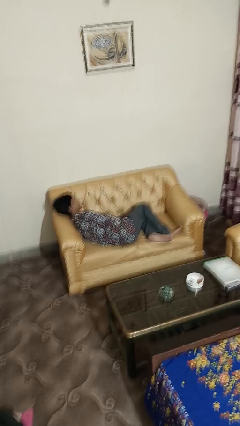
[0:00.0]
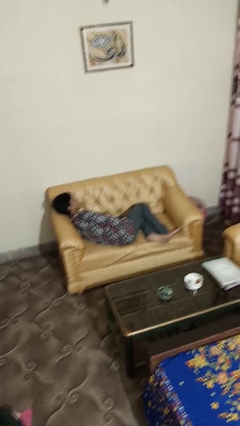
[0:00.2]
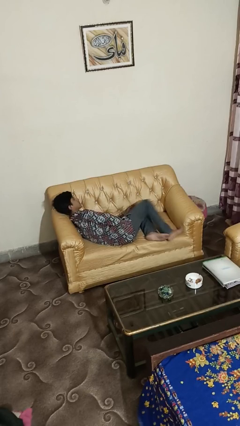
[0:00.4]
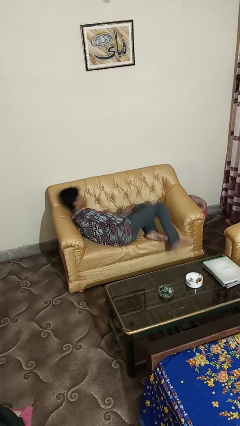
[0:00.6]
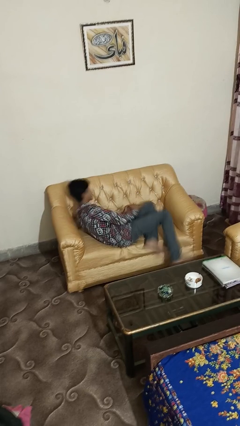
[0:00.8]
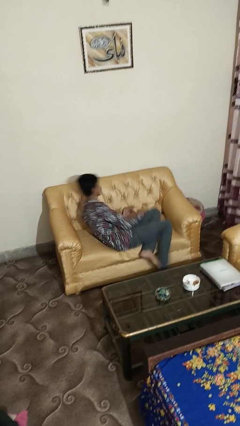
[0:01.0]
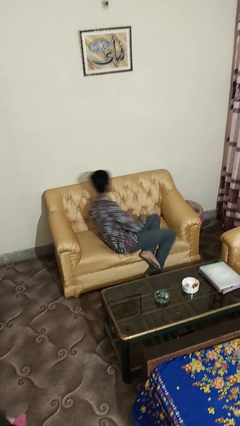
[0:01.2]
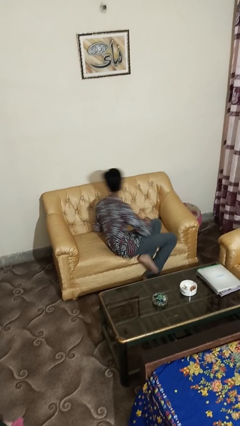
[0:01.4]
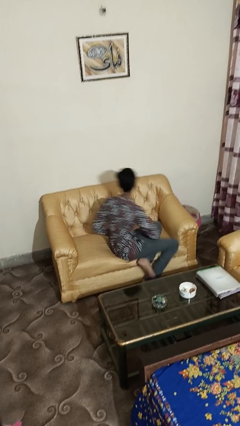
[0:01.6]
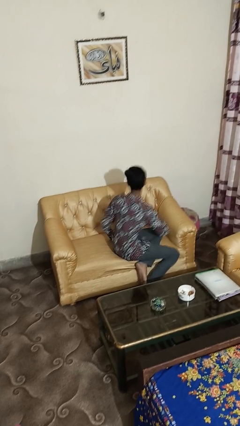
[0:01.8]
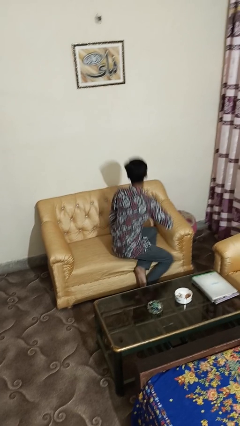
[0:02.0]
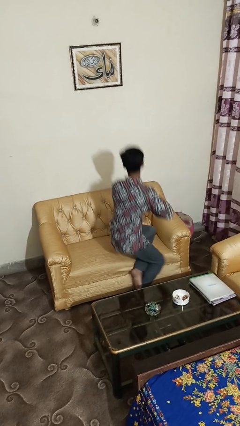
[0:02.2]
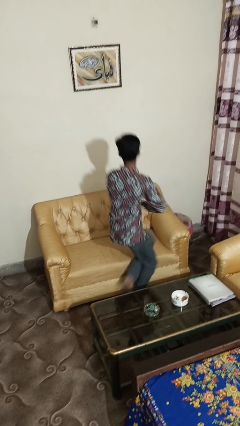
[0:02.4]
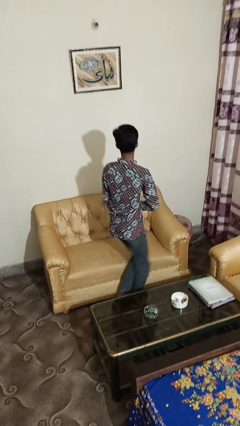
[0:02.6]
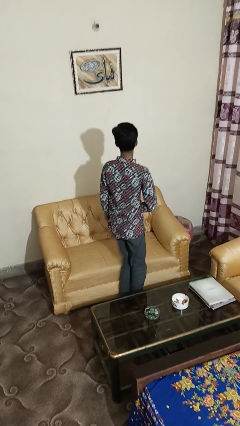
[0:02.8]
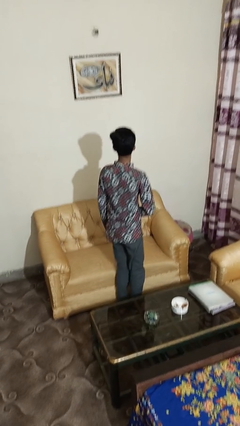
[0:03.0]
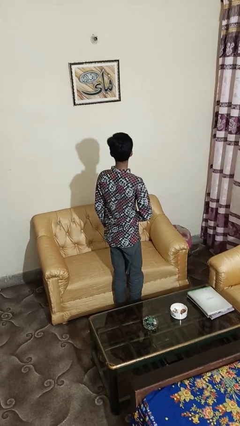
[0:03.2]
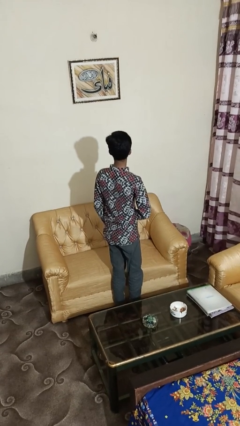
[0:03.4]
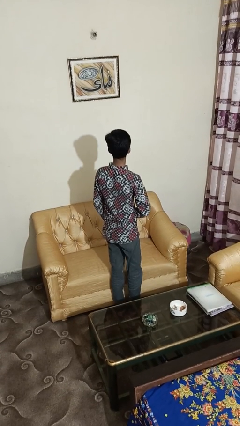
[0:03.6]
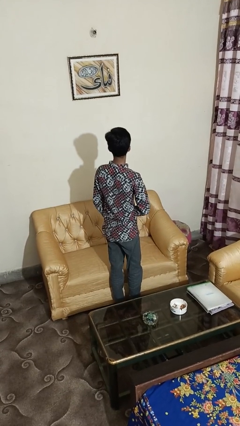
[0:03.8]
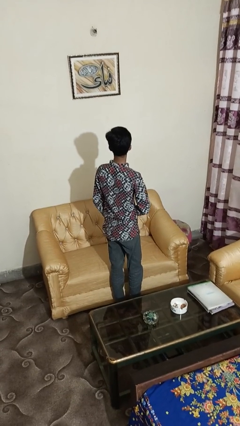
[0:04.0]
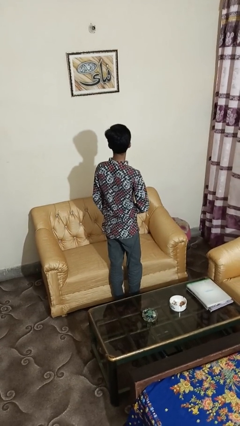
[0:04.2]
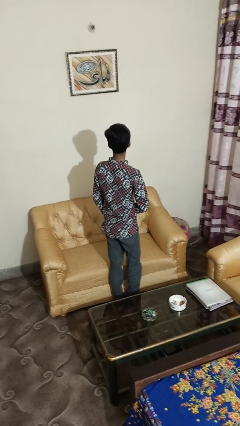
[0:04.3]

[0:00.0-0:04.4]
person stands up

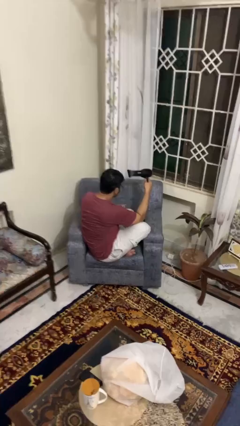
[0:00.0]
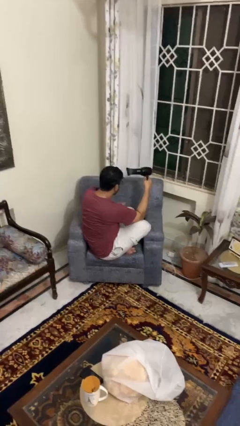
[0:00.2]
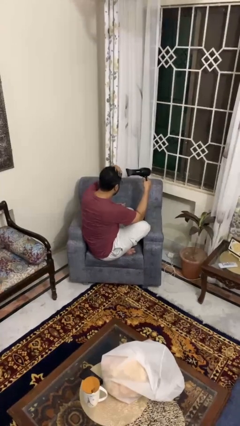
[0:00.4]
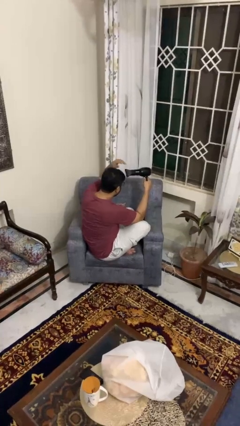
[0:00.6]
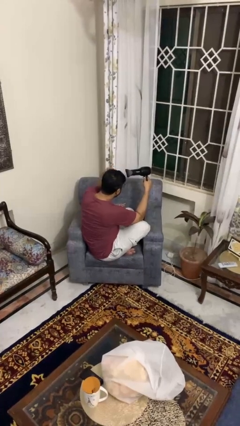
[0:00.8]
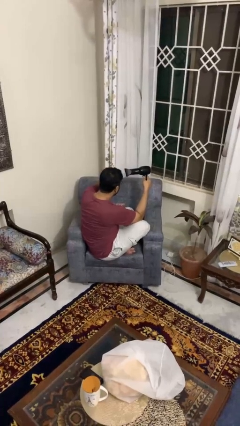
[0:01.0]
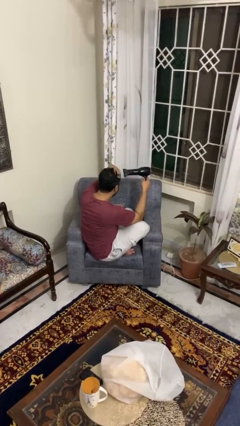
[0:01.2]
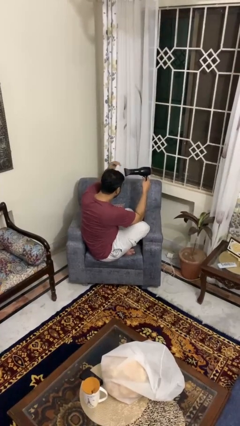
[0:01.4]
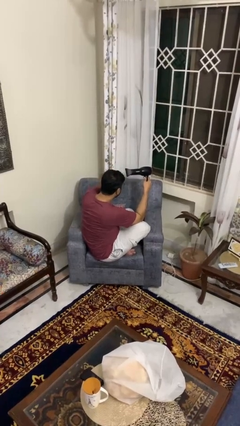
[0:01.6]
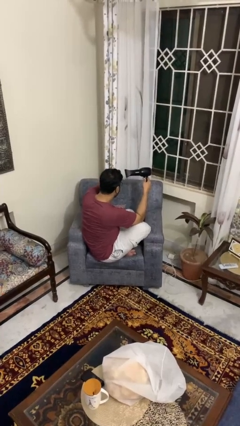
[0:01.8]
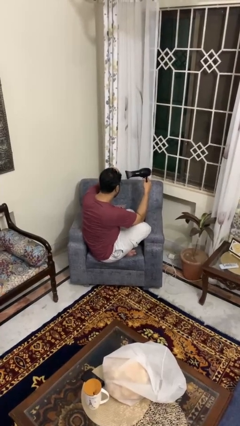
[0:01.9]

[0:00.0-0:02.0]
person dries hair with hairdryer

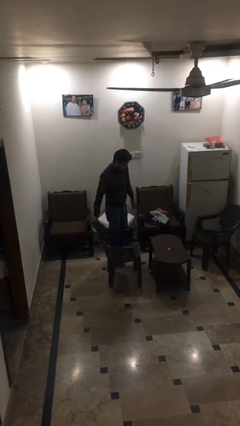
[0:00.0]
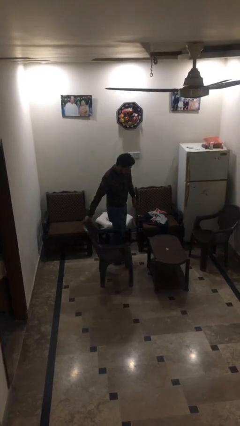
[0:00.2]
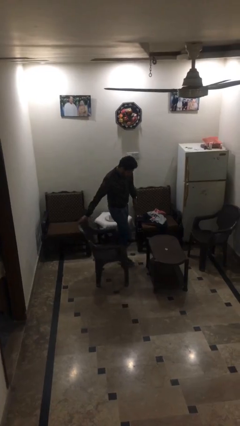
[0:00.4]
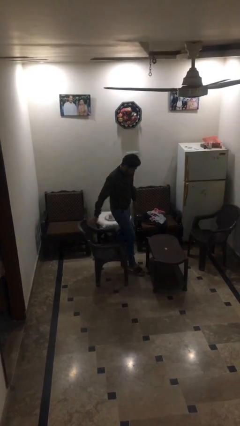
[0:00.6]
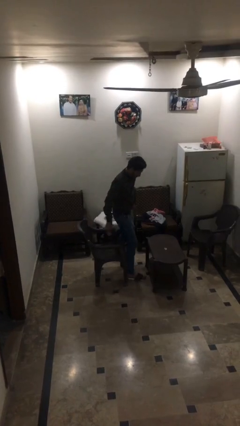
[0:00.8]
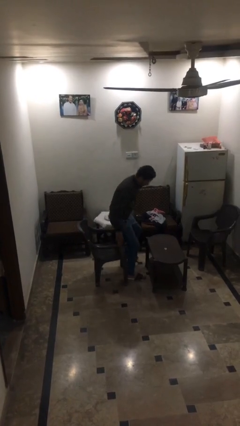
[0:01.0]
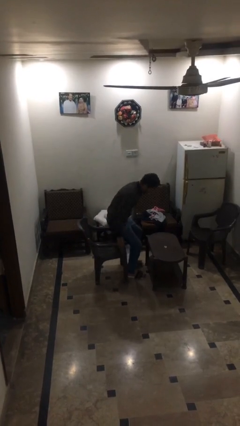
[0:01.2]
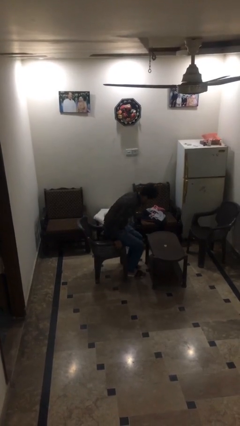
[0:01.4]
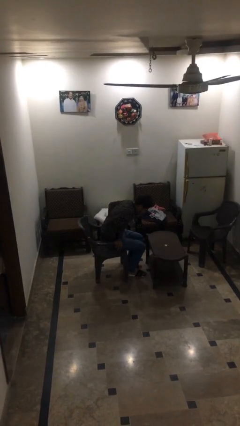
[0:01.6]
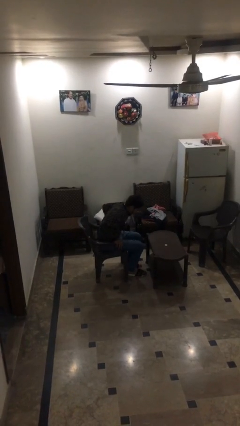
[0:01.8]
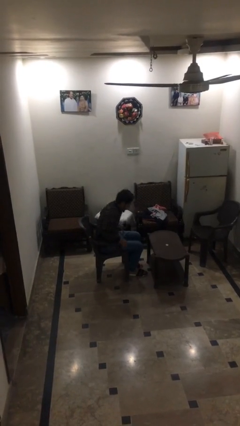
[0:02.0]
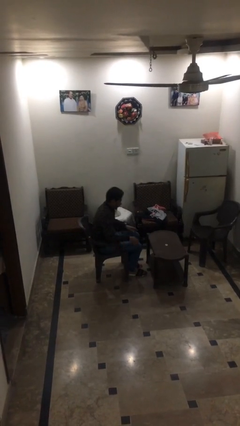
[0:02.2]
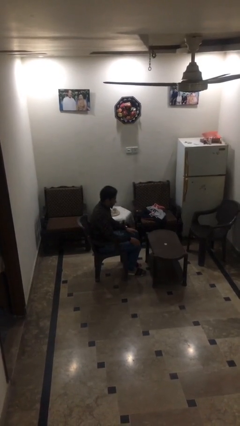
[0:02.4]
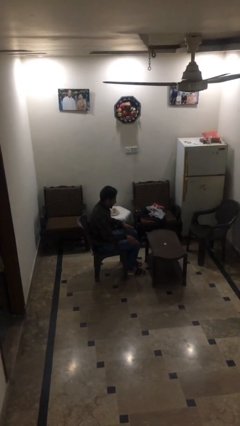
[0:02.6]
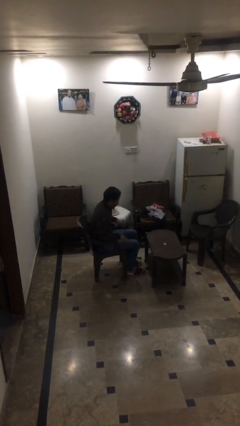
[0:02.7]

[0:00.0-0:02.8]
person sits down

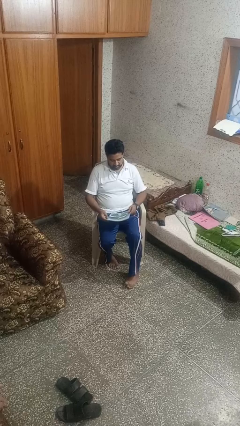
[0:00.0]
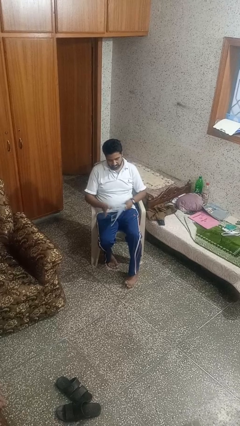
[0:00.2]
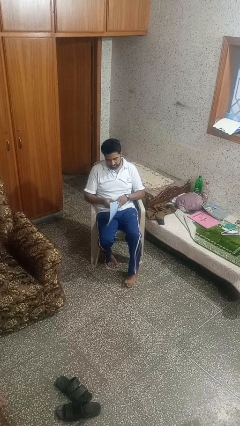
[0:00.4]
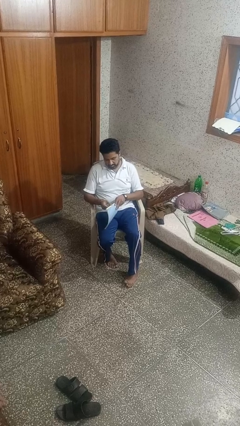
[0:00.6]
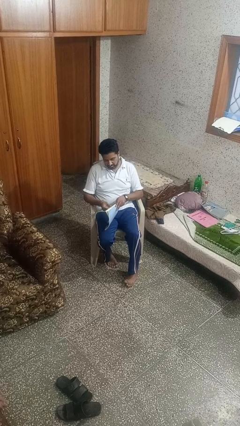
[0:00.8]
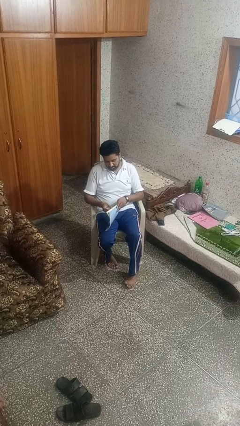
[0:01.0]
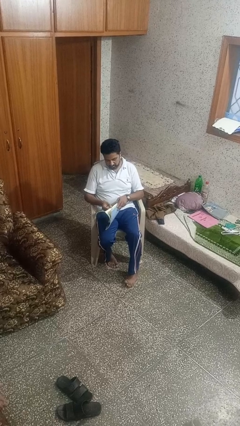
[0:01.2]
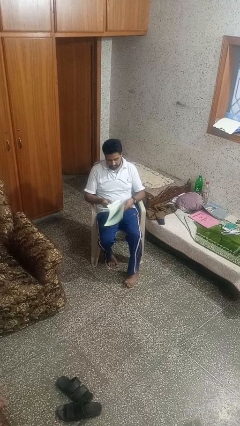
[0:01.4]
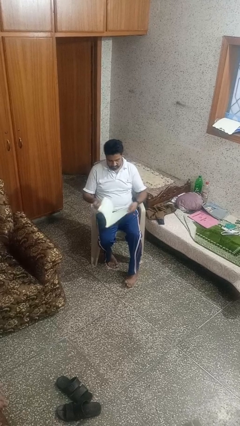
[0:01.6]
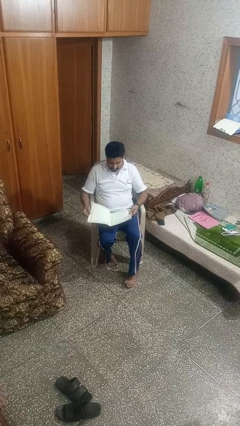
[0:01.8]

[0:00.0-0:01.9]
person reads magazine

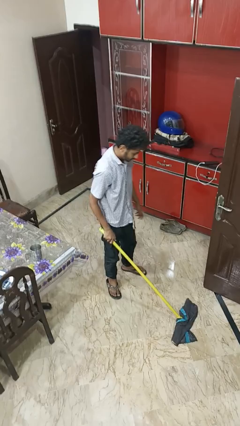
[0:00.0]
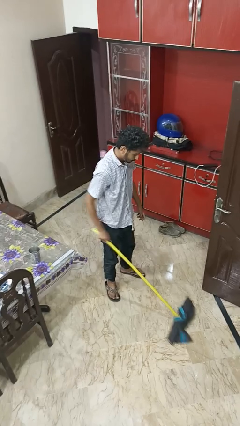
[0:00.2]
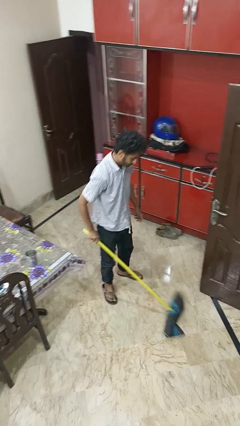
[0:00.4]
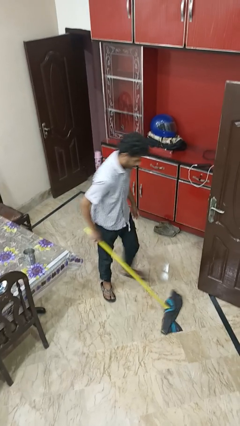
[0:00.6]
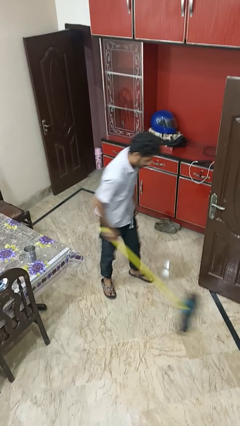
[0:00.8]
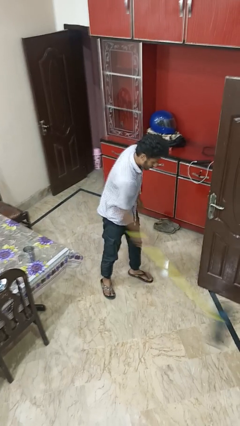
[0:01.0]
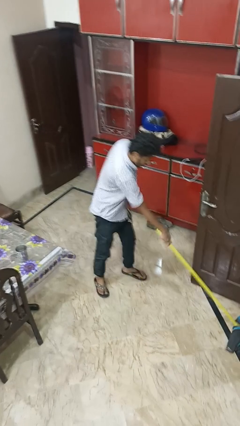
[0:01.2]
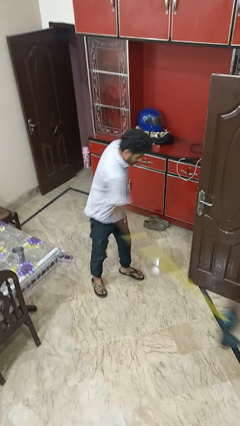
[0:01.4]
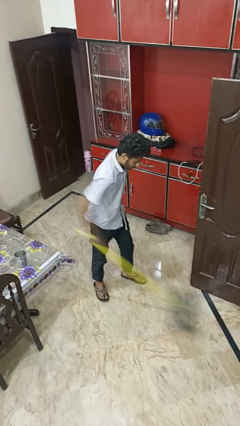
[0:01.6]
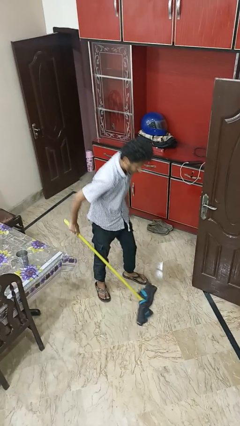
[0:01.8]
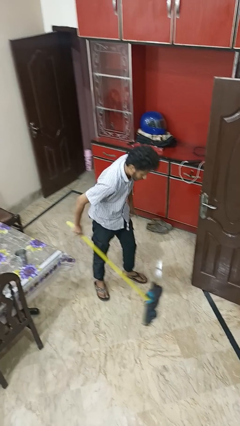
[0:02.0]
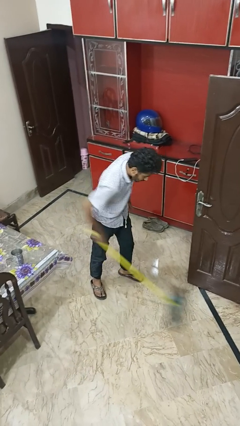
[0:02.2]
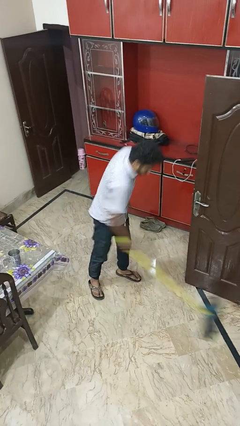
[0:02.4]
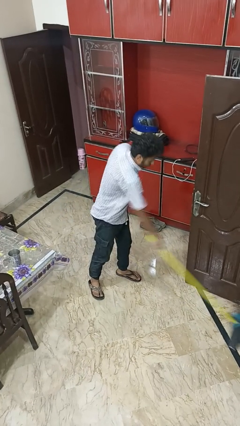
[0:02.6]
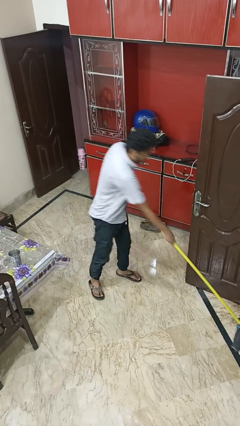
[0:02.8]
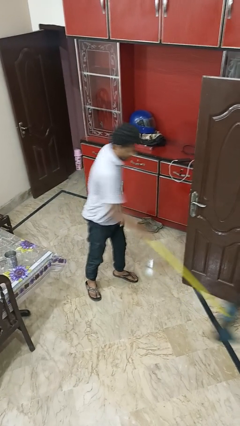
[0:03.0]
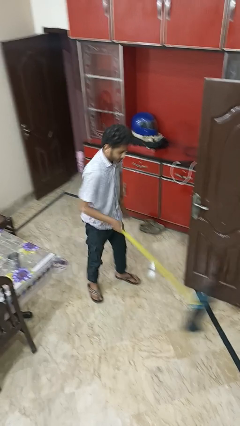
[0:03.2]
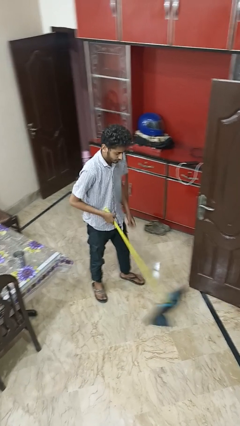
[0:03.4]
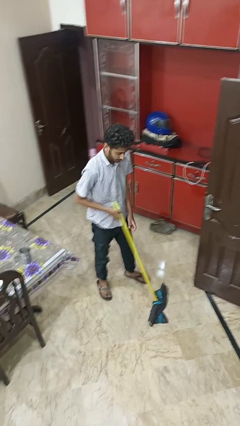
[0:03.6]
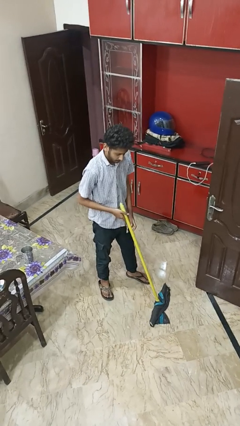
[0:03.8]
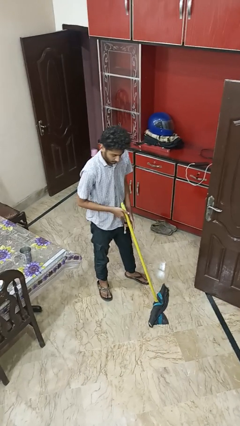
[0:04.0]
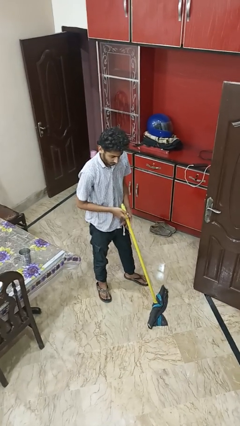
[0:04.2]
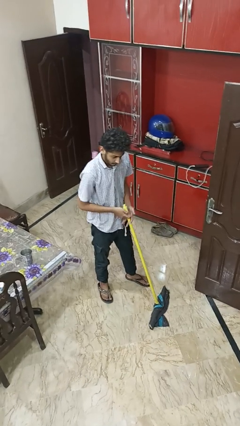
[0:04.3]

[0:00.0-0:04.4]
person mops

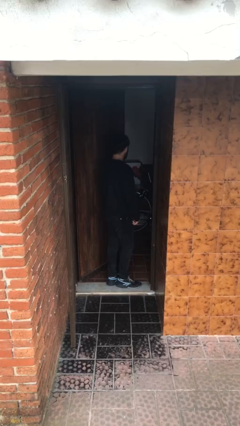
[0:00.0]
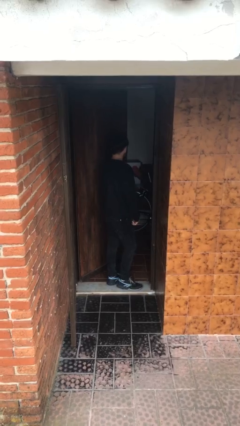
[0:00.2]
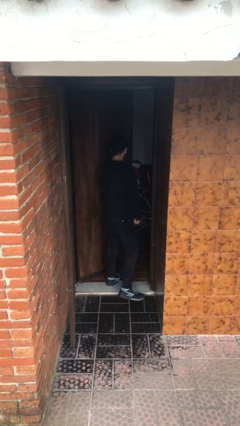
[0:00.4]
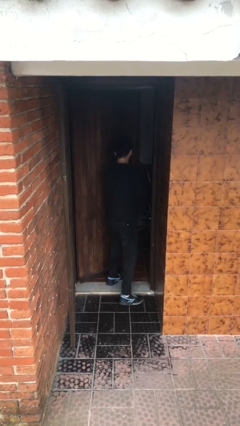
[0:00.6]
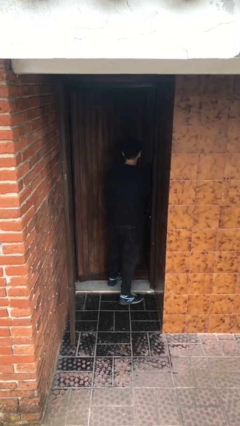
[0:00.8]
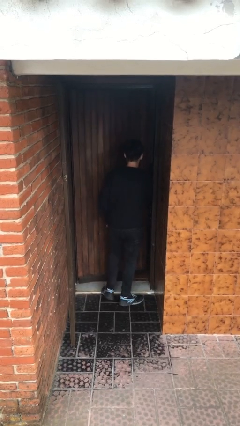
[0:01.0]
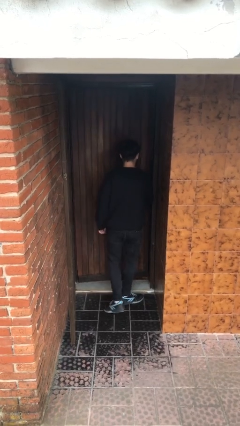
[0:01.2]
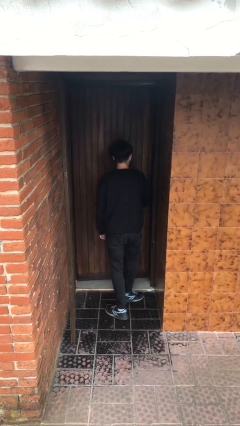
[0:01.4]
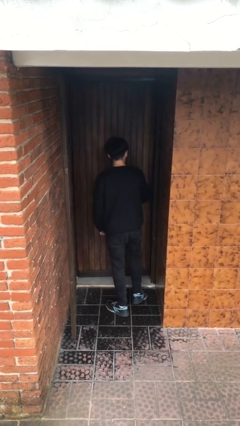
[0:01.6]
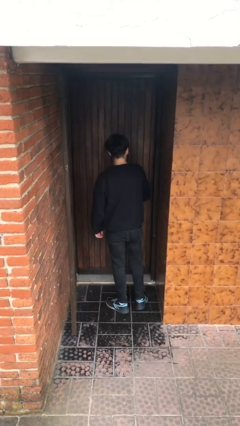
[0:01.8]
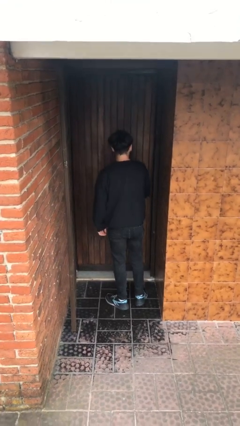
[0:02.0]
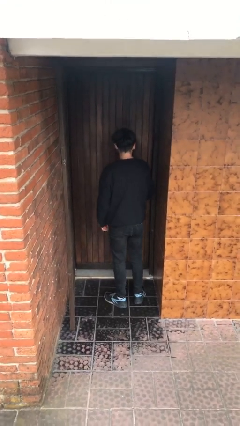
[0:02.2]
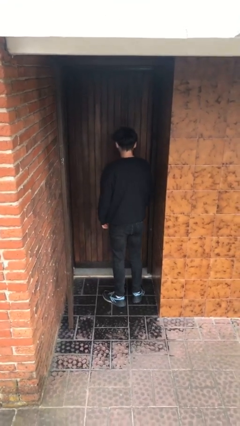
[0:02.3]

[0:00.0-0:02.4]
person closes facility door
